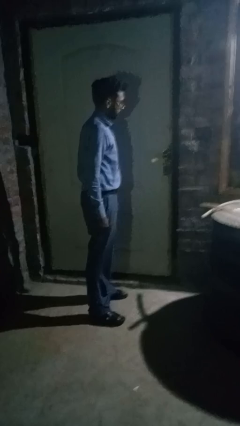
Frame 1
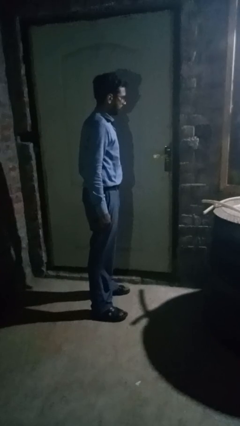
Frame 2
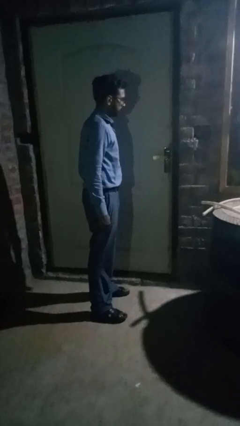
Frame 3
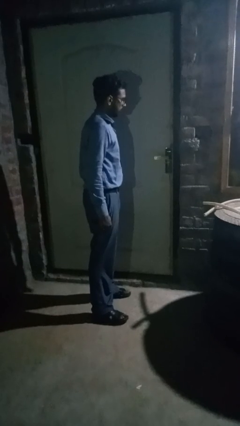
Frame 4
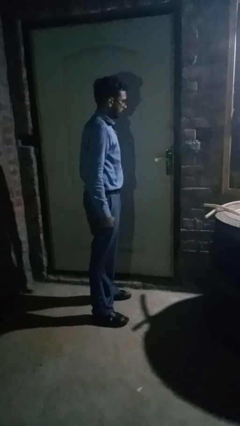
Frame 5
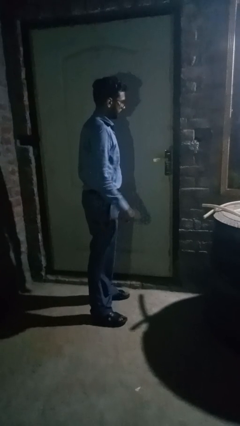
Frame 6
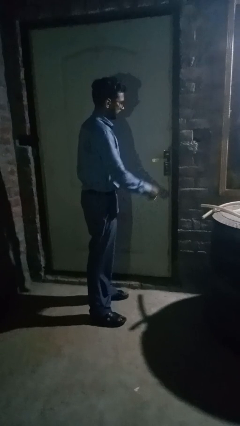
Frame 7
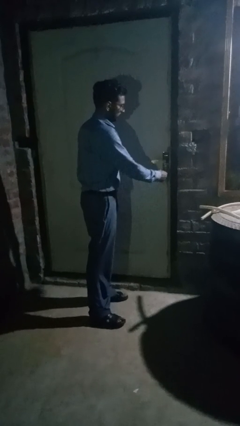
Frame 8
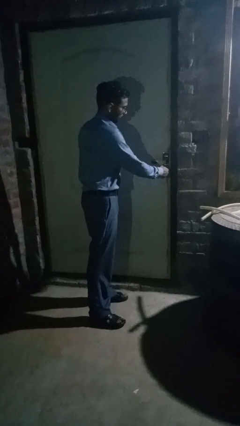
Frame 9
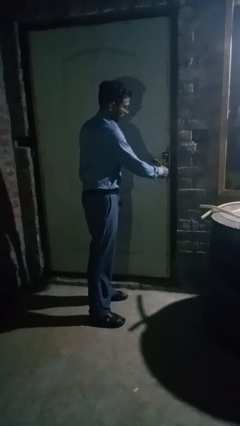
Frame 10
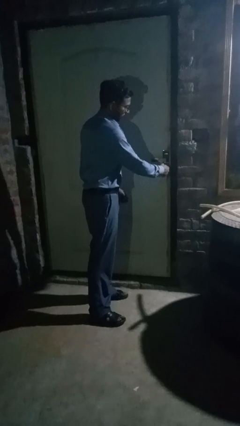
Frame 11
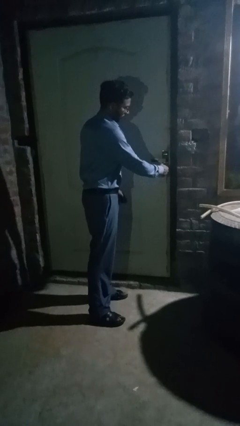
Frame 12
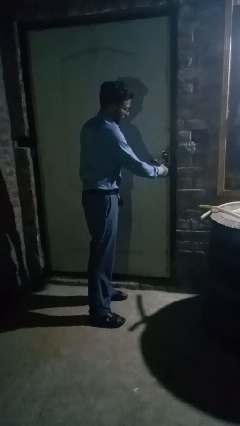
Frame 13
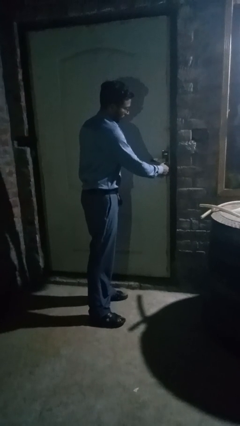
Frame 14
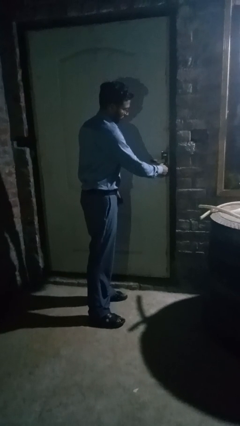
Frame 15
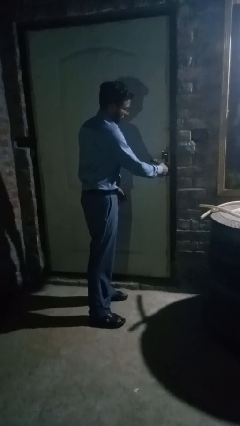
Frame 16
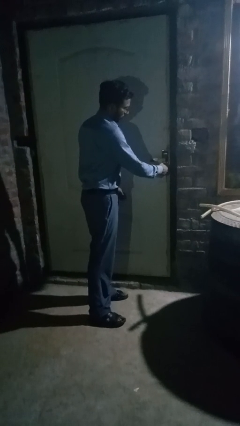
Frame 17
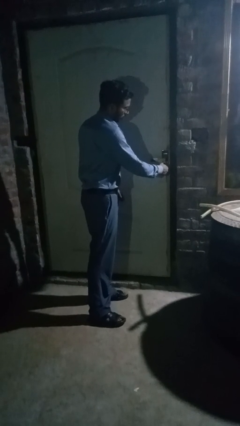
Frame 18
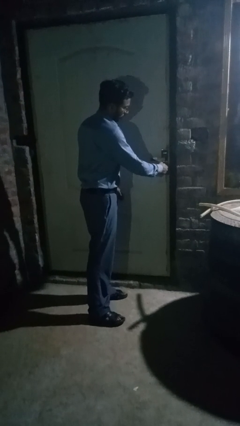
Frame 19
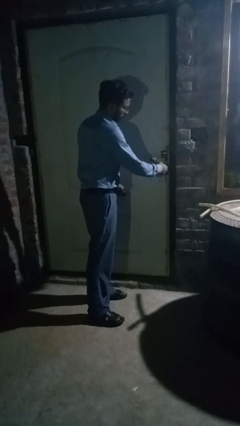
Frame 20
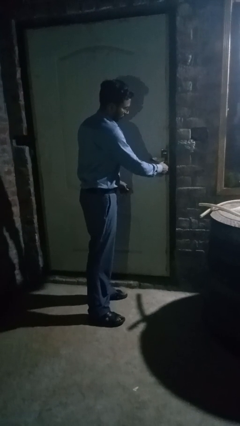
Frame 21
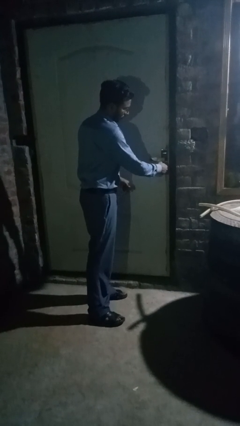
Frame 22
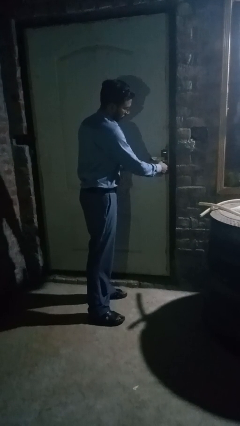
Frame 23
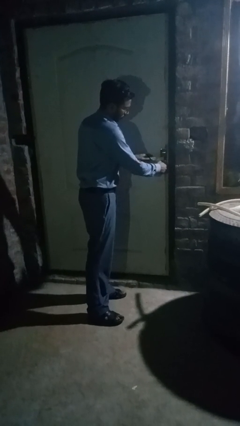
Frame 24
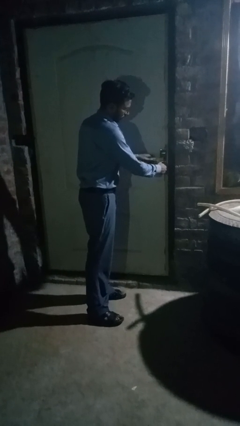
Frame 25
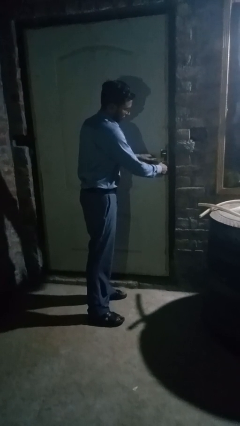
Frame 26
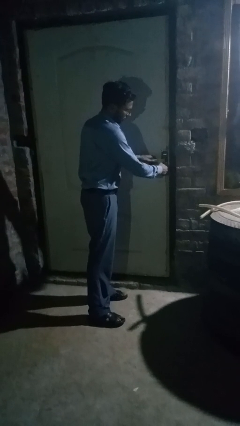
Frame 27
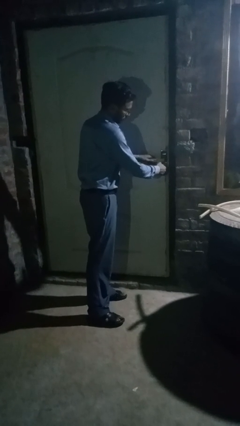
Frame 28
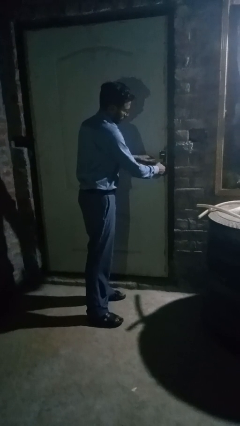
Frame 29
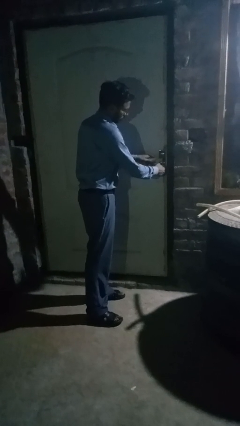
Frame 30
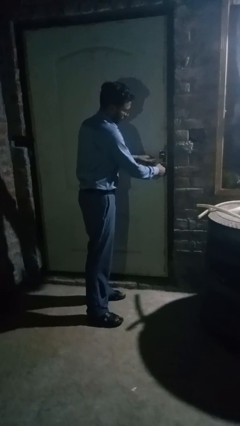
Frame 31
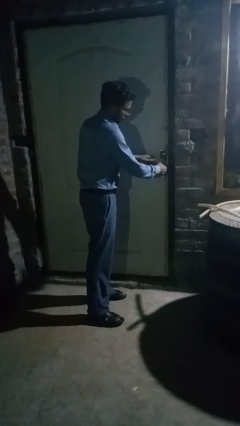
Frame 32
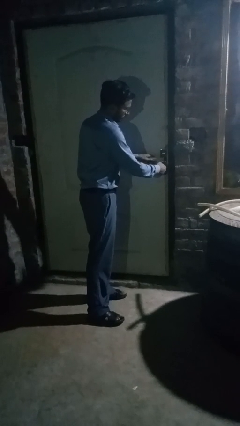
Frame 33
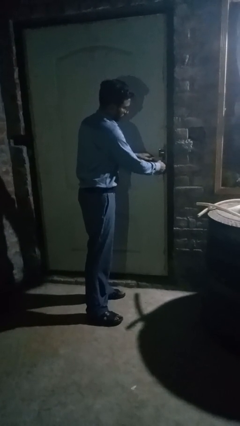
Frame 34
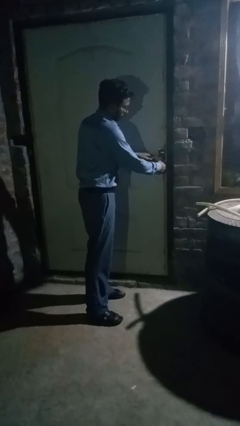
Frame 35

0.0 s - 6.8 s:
person unlocks door with keys

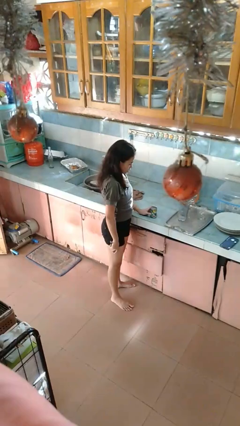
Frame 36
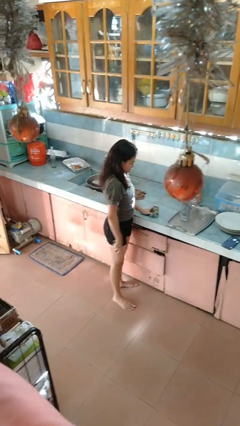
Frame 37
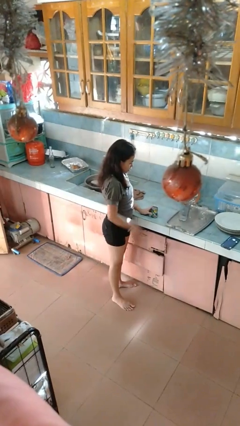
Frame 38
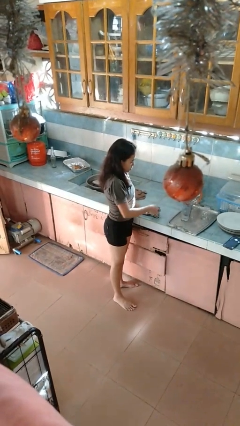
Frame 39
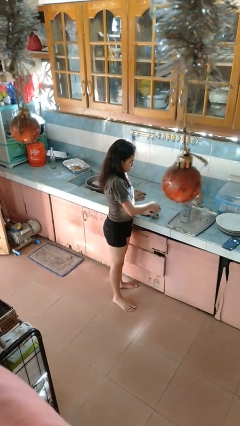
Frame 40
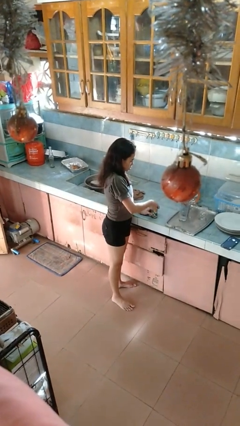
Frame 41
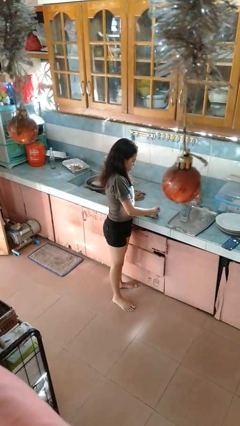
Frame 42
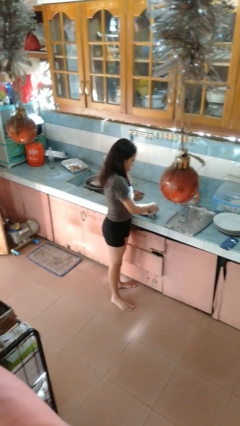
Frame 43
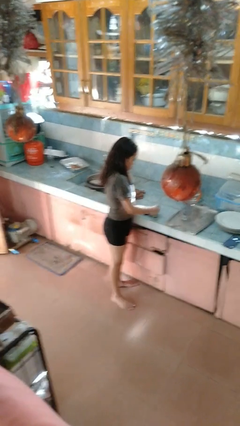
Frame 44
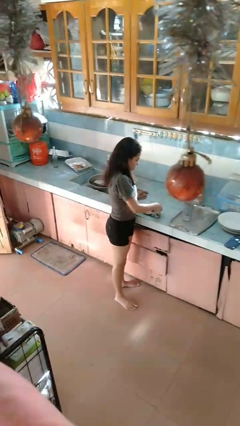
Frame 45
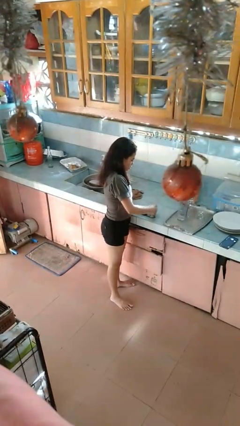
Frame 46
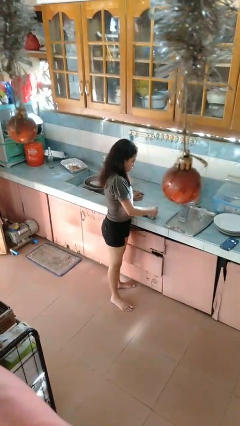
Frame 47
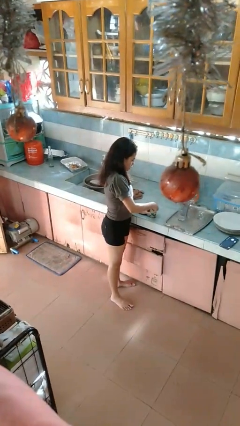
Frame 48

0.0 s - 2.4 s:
person opens can with can opener

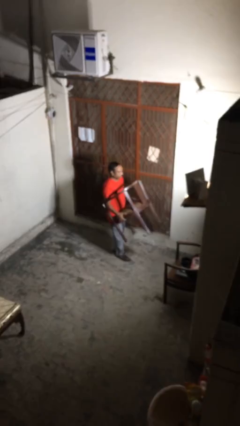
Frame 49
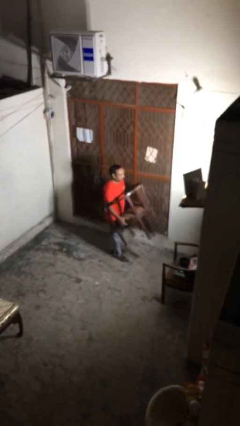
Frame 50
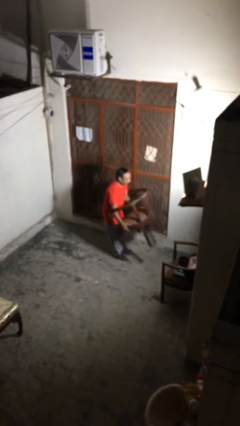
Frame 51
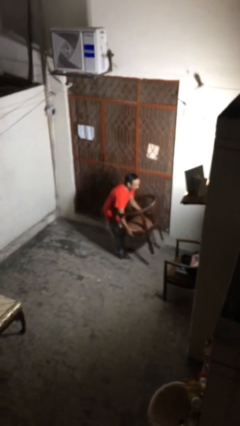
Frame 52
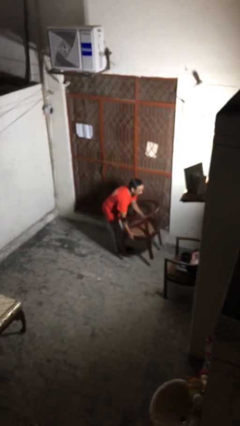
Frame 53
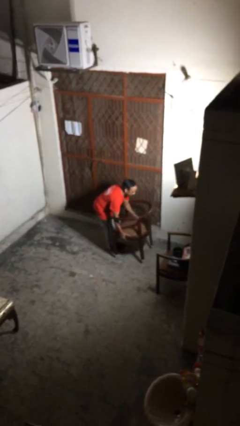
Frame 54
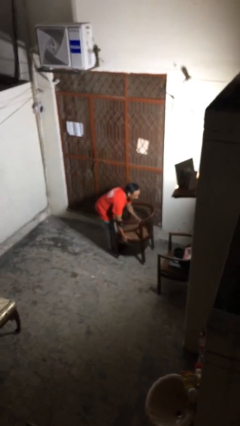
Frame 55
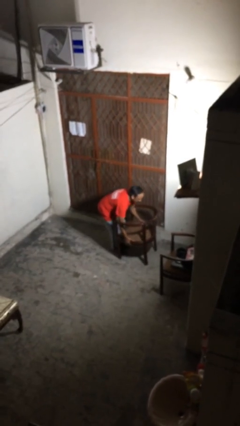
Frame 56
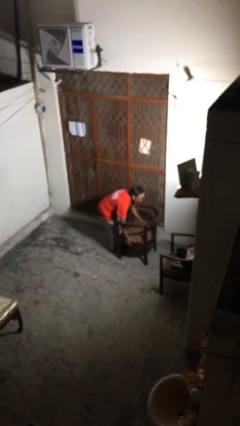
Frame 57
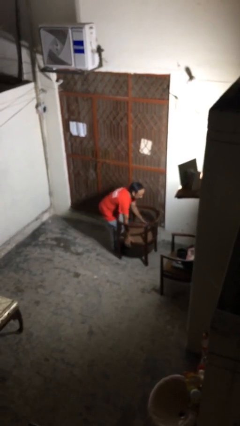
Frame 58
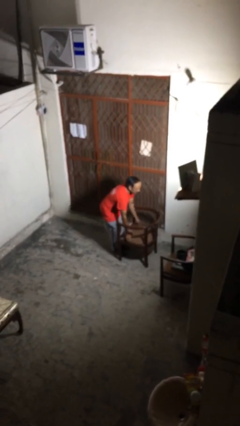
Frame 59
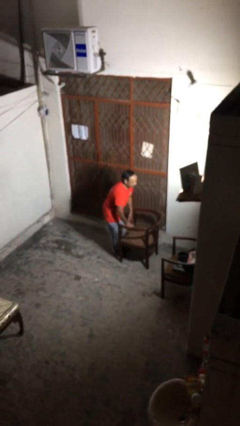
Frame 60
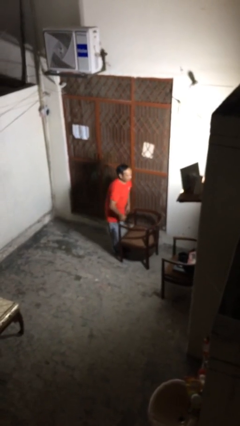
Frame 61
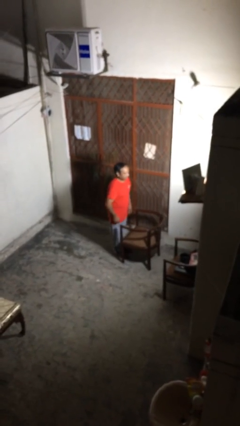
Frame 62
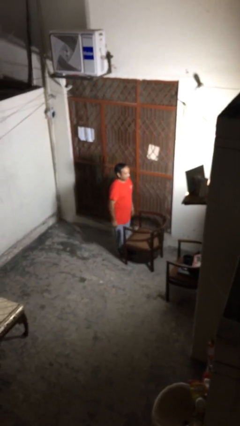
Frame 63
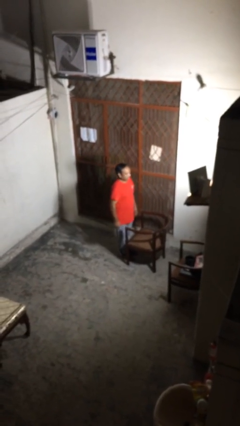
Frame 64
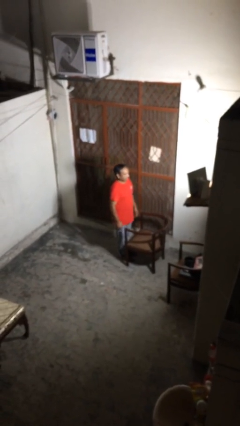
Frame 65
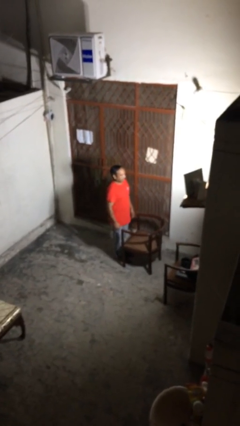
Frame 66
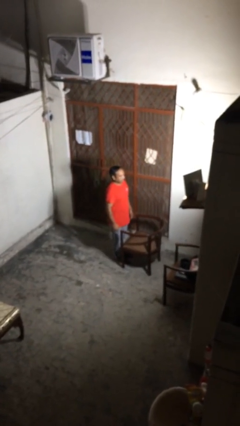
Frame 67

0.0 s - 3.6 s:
person puts down object on floor

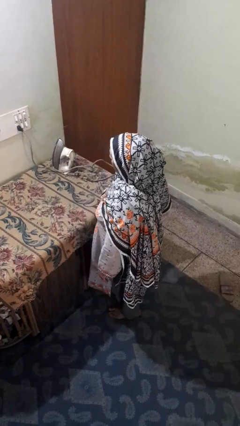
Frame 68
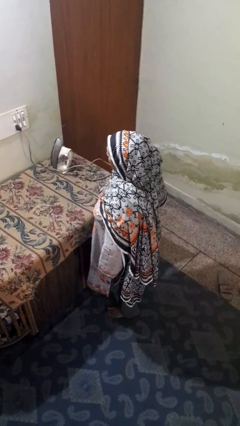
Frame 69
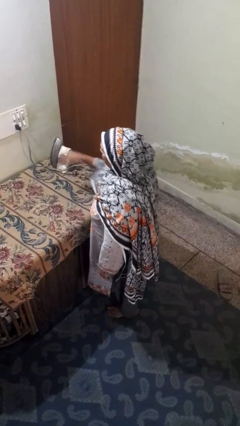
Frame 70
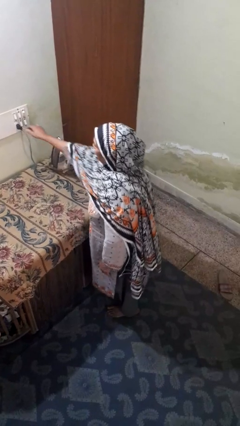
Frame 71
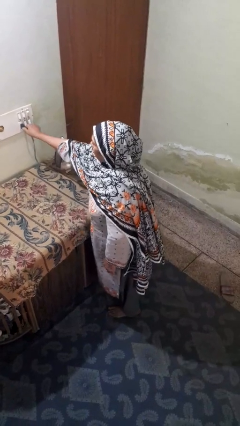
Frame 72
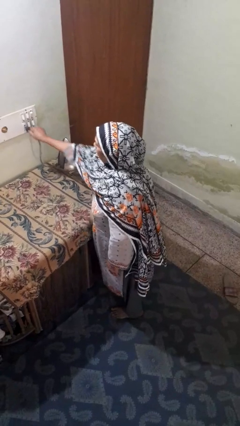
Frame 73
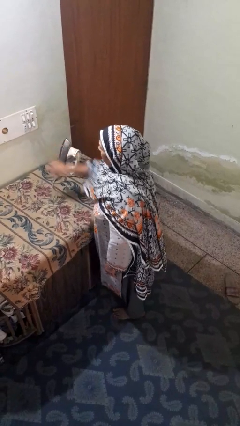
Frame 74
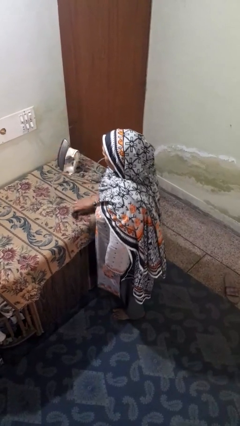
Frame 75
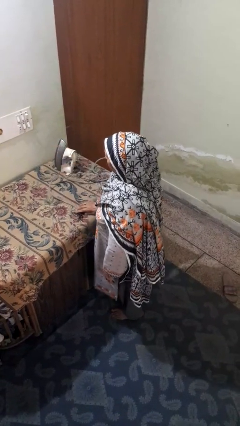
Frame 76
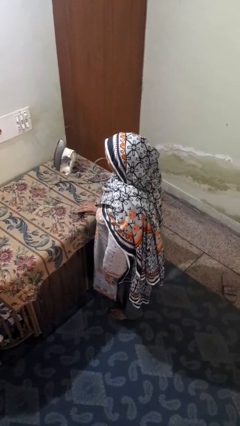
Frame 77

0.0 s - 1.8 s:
person unplugs from electrical socket

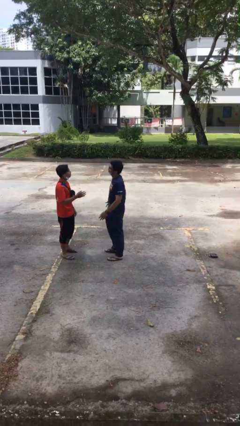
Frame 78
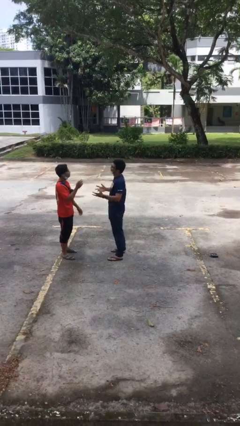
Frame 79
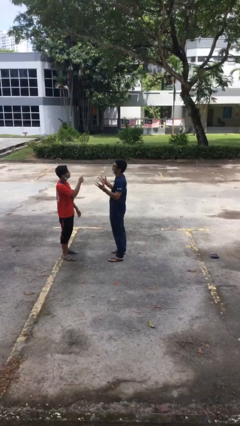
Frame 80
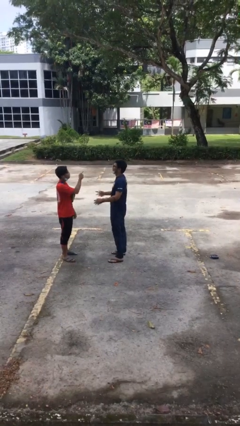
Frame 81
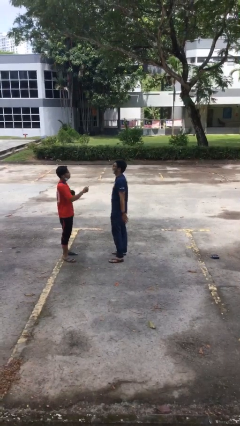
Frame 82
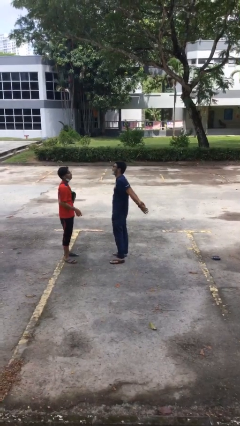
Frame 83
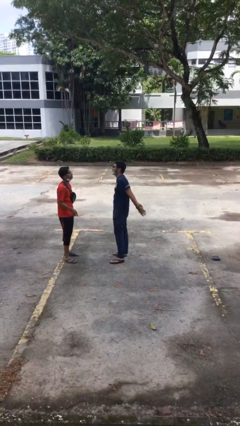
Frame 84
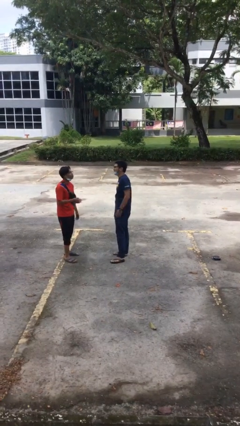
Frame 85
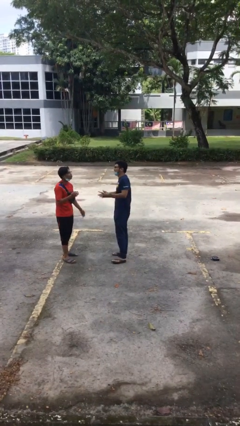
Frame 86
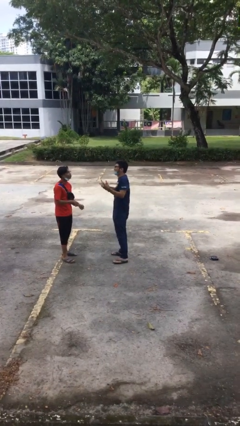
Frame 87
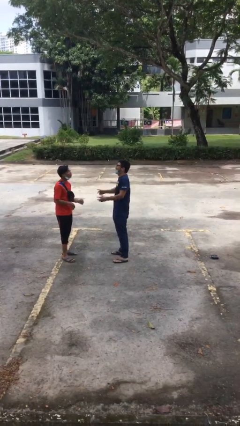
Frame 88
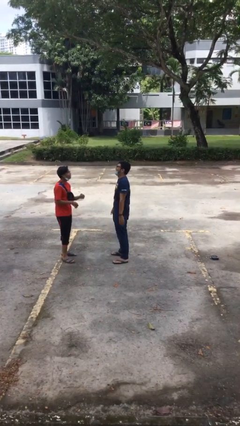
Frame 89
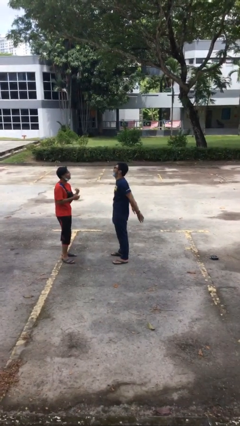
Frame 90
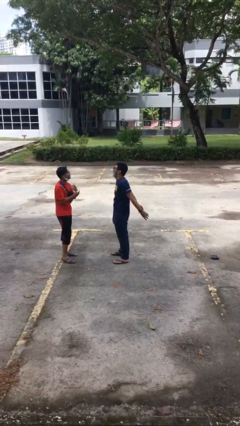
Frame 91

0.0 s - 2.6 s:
person talks to person

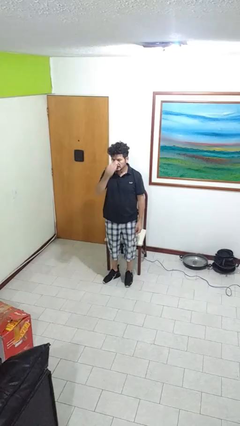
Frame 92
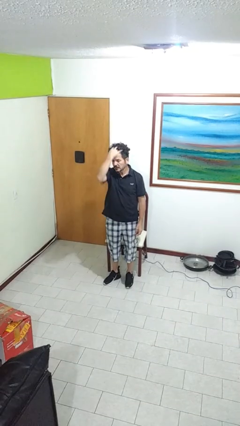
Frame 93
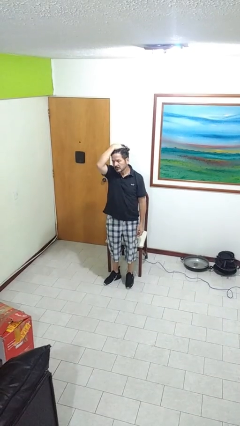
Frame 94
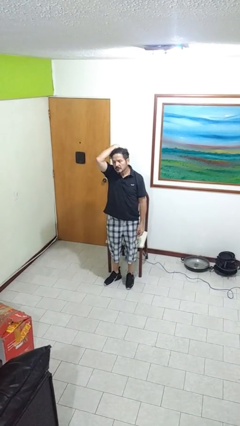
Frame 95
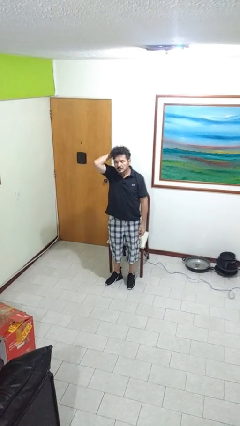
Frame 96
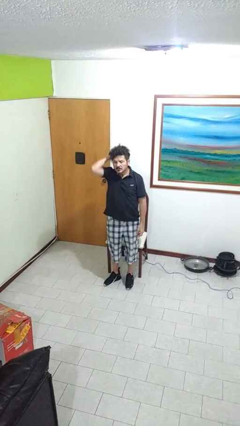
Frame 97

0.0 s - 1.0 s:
person strokes hair
